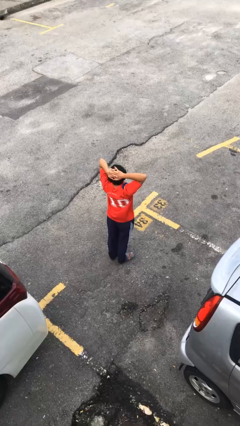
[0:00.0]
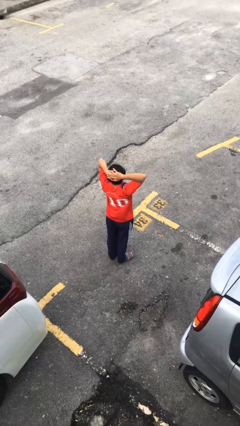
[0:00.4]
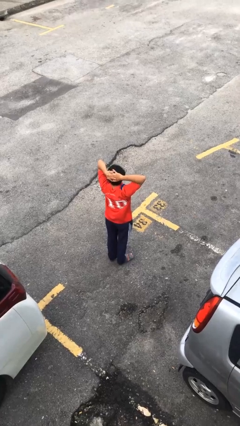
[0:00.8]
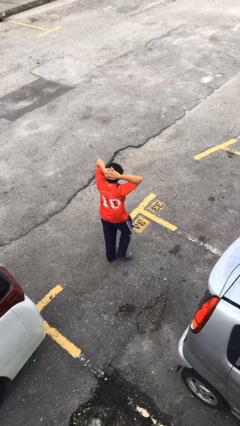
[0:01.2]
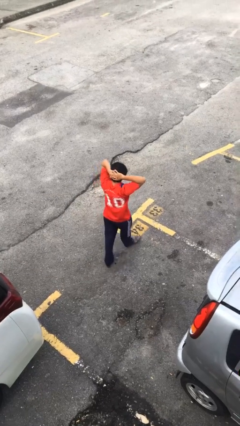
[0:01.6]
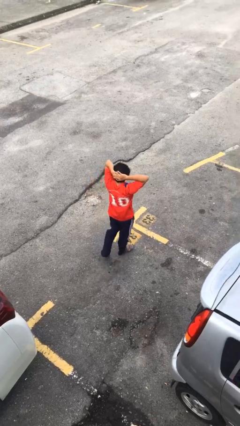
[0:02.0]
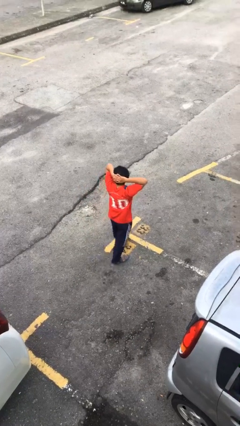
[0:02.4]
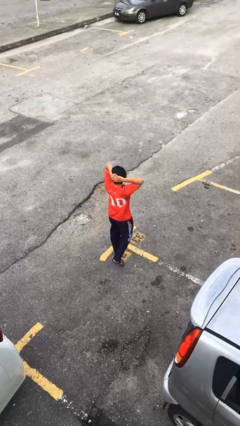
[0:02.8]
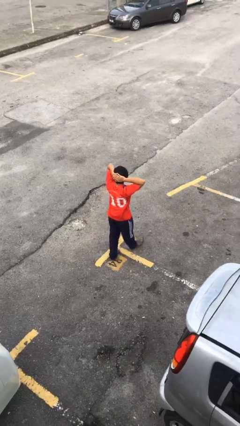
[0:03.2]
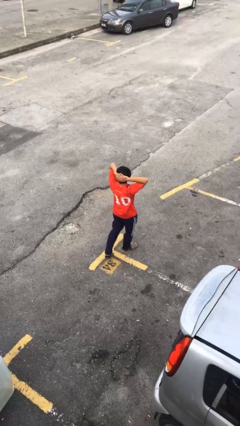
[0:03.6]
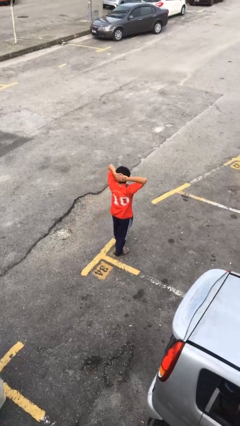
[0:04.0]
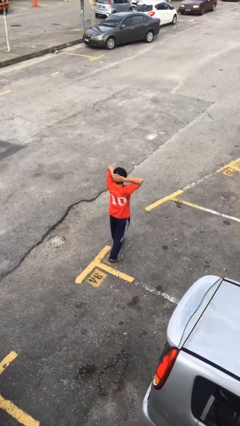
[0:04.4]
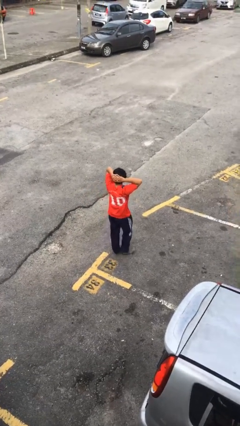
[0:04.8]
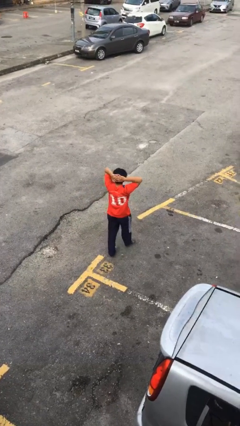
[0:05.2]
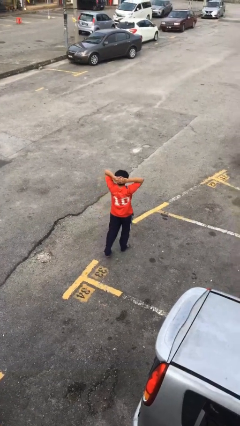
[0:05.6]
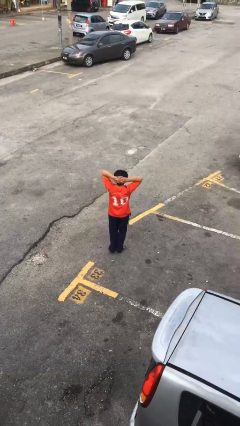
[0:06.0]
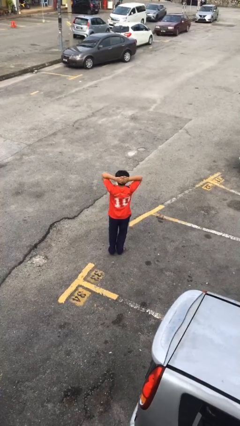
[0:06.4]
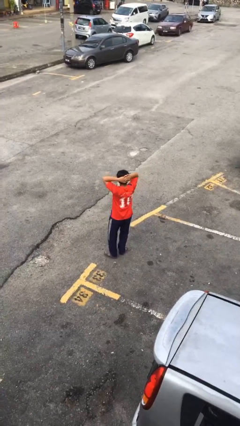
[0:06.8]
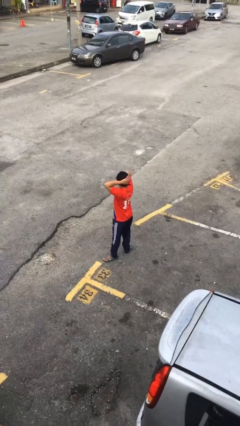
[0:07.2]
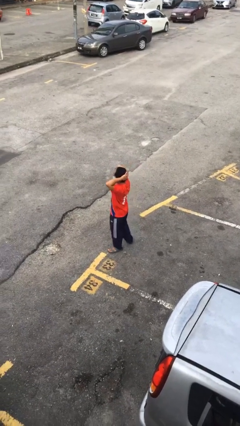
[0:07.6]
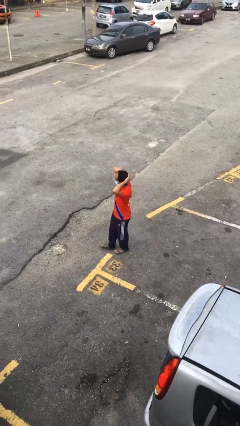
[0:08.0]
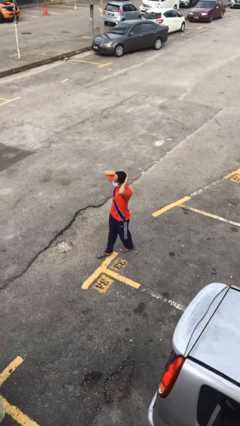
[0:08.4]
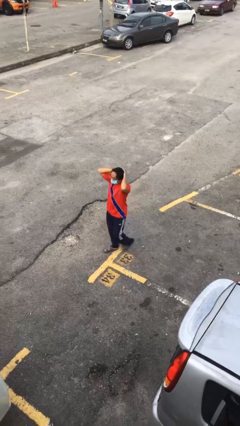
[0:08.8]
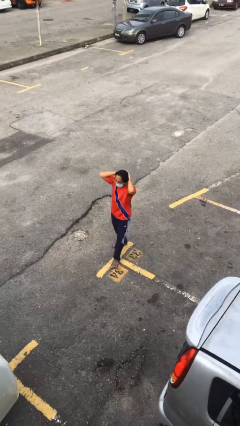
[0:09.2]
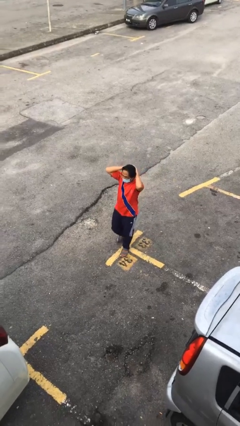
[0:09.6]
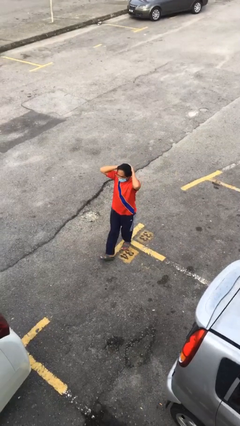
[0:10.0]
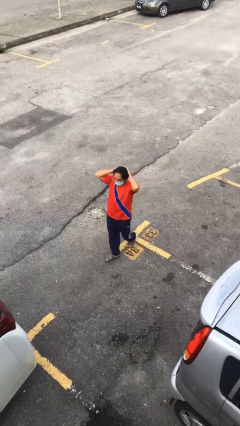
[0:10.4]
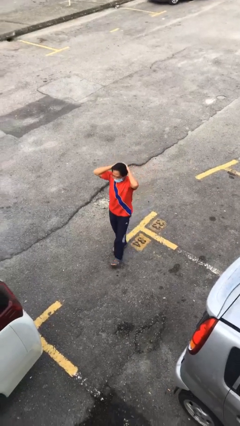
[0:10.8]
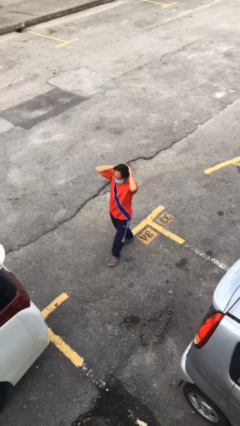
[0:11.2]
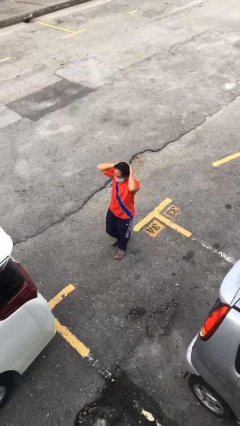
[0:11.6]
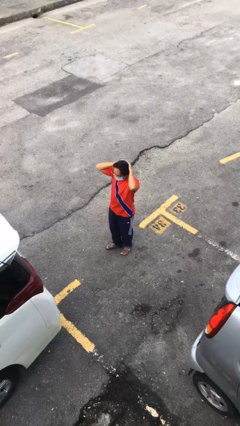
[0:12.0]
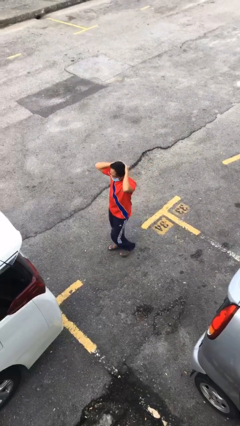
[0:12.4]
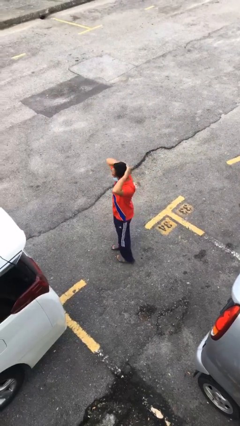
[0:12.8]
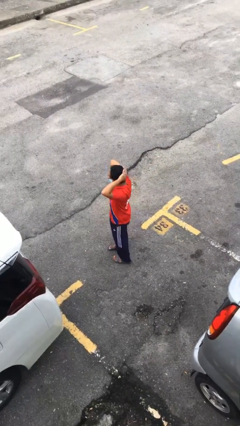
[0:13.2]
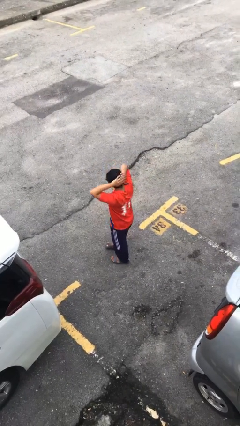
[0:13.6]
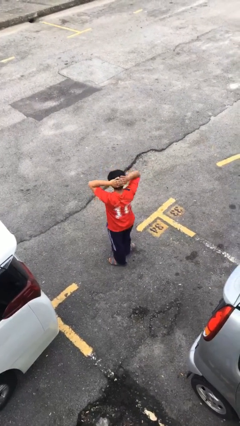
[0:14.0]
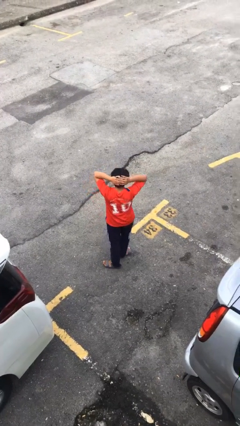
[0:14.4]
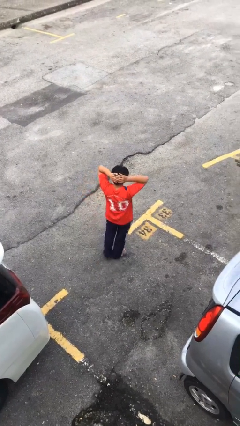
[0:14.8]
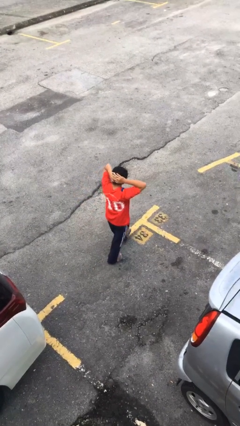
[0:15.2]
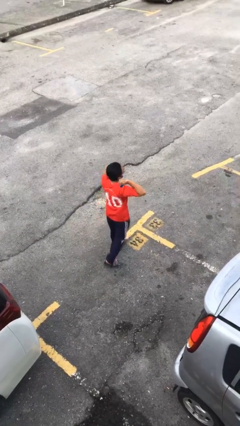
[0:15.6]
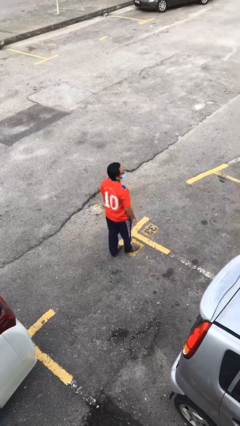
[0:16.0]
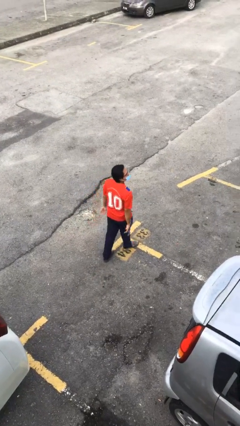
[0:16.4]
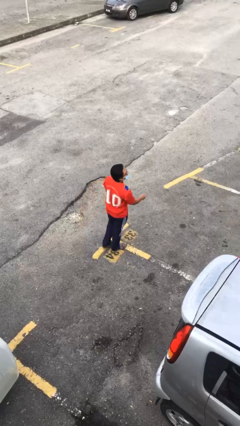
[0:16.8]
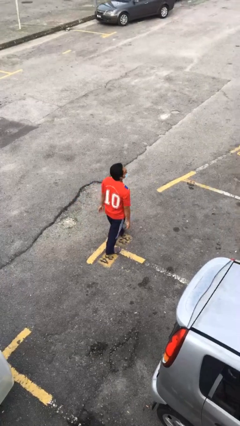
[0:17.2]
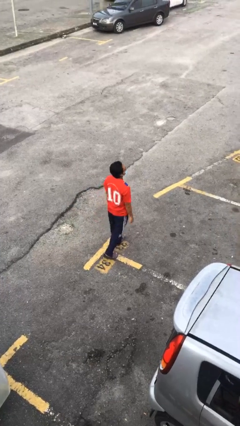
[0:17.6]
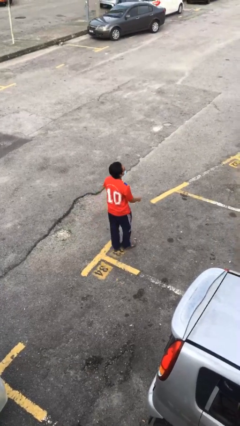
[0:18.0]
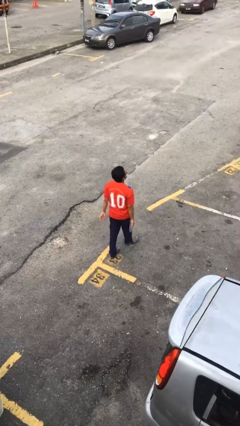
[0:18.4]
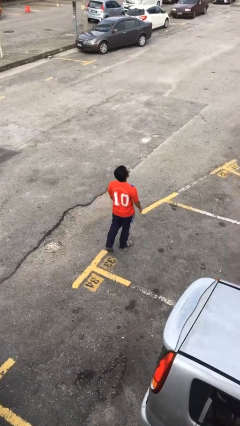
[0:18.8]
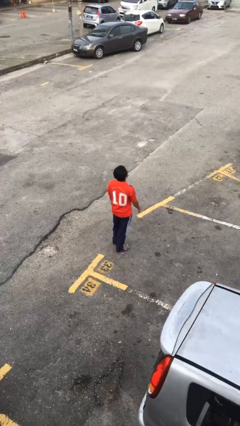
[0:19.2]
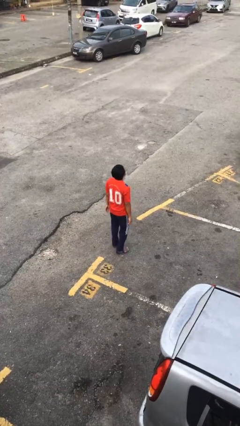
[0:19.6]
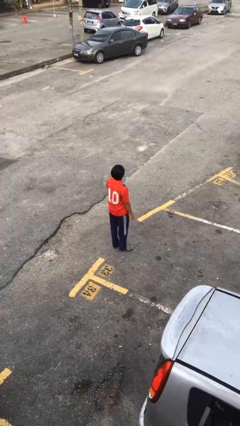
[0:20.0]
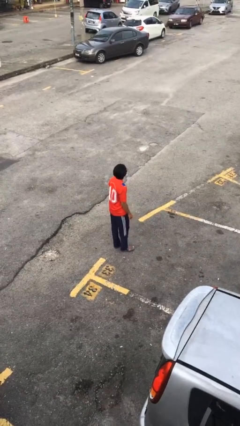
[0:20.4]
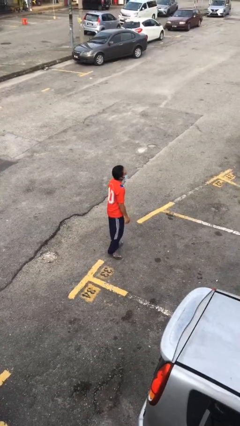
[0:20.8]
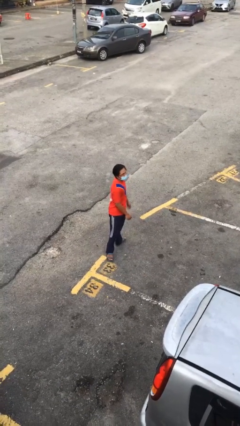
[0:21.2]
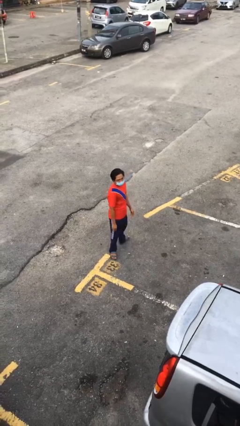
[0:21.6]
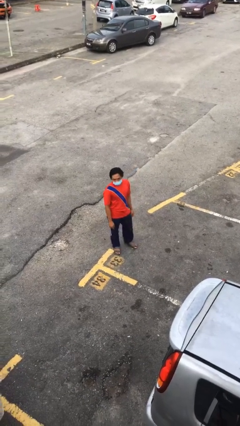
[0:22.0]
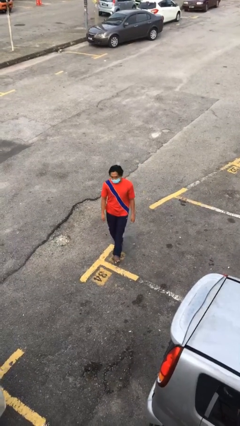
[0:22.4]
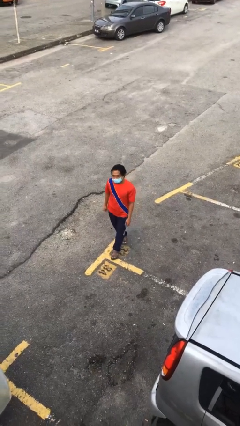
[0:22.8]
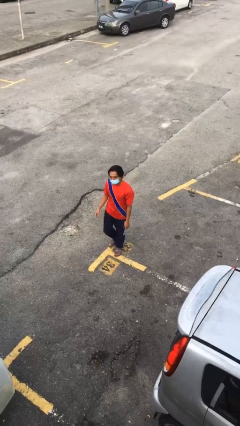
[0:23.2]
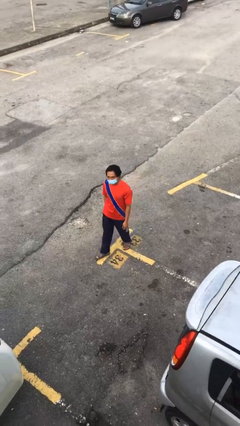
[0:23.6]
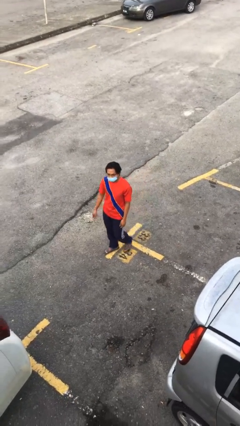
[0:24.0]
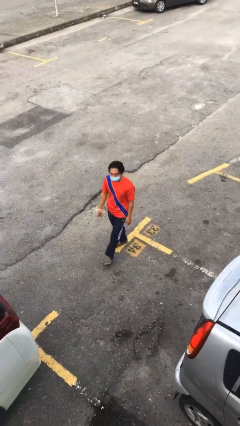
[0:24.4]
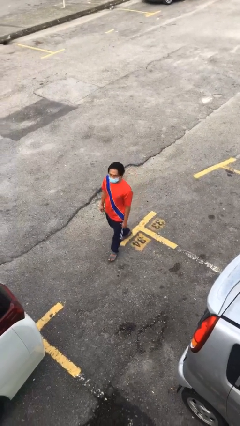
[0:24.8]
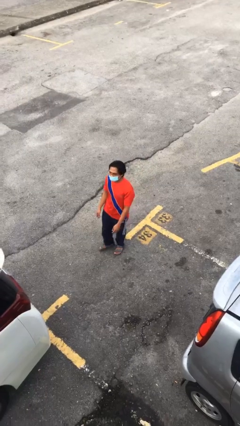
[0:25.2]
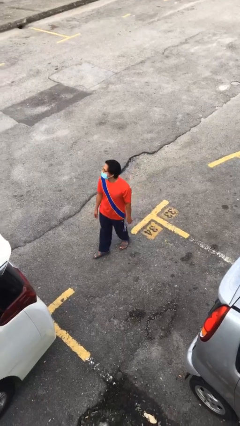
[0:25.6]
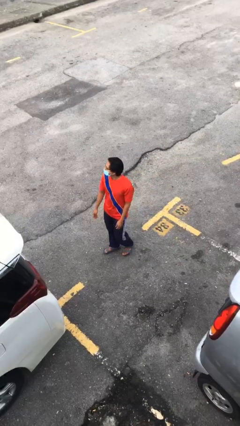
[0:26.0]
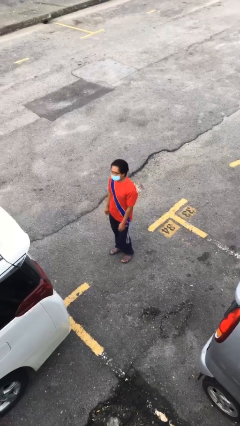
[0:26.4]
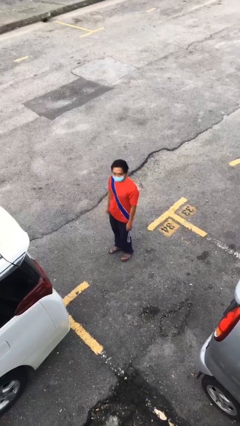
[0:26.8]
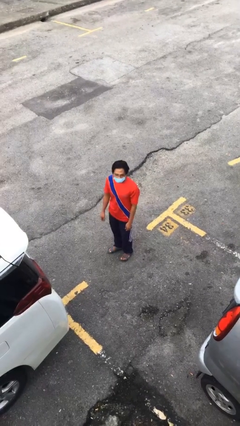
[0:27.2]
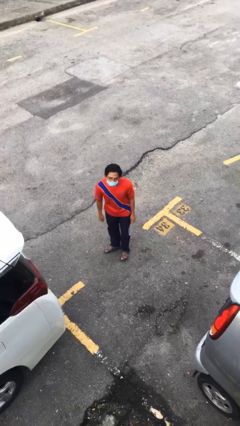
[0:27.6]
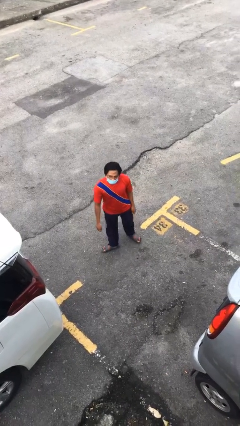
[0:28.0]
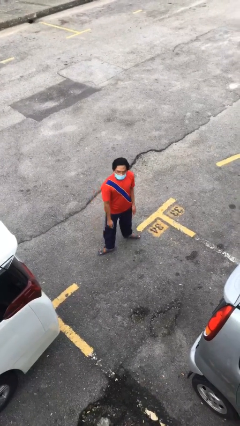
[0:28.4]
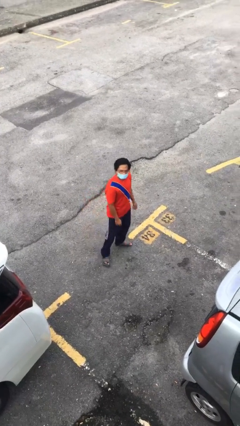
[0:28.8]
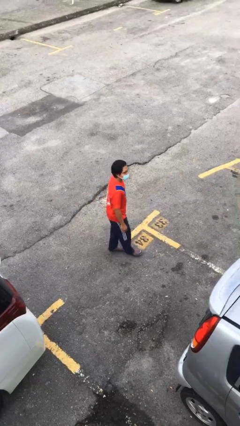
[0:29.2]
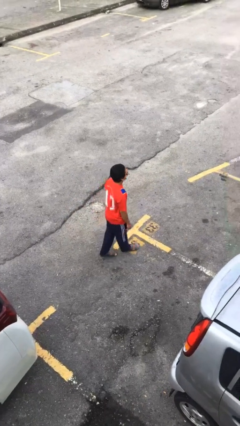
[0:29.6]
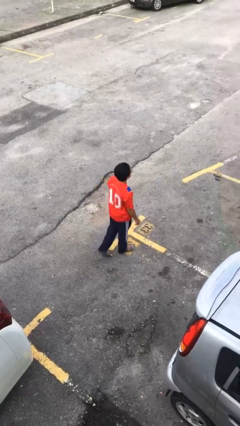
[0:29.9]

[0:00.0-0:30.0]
person walks

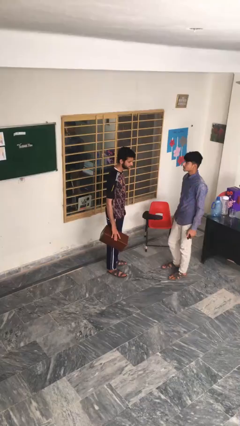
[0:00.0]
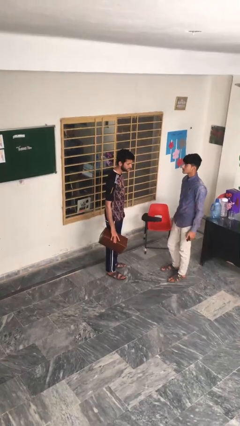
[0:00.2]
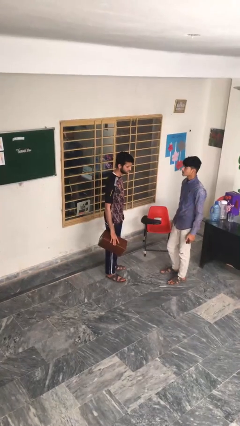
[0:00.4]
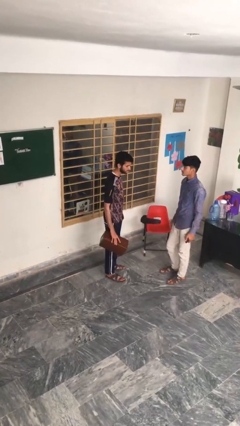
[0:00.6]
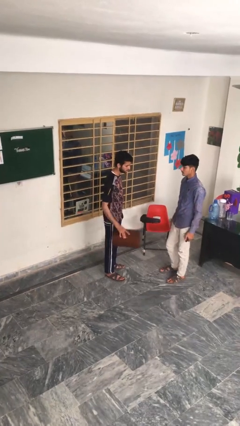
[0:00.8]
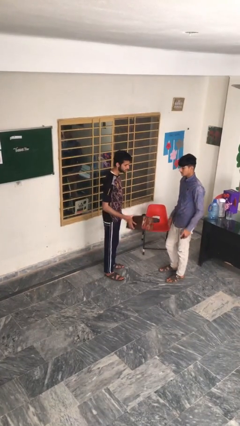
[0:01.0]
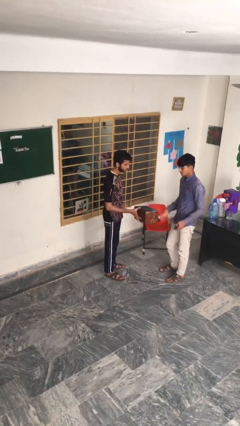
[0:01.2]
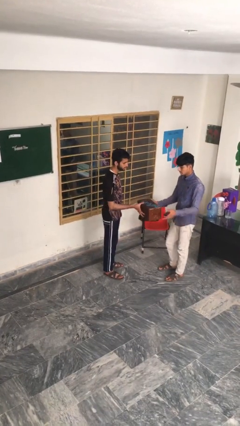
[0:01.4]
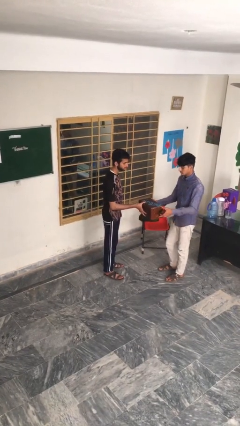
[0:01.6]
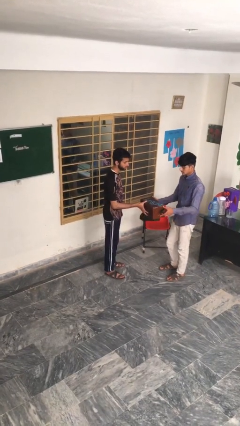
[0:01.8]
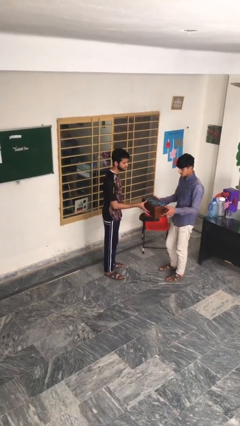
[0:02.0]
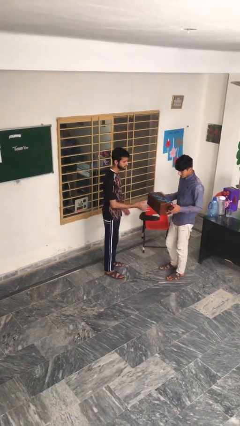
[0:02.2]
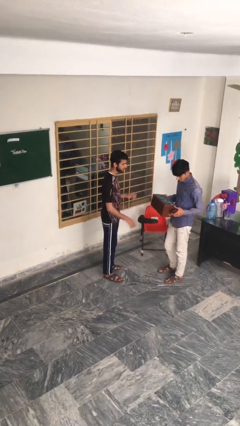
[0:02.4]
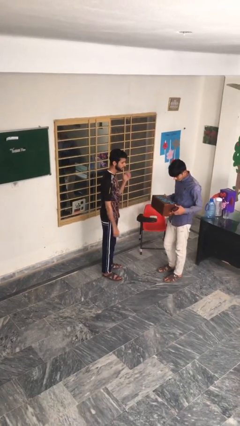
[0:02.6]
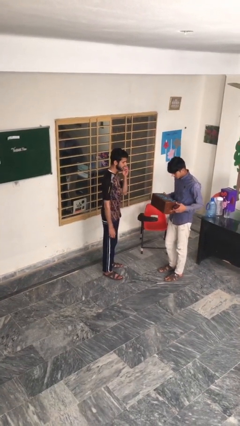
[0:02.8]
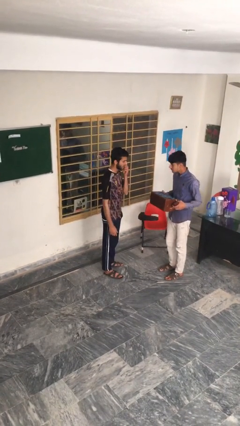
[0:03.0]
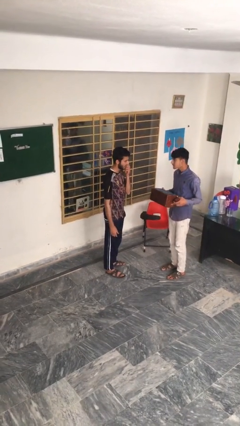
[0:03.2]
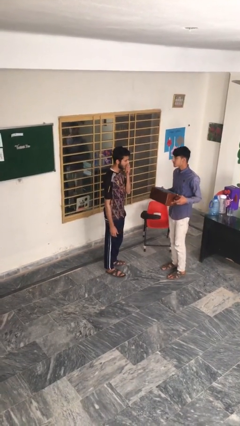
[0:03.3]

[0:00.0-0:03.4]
person transfers object to person
